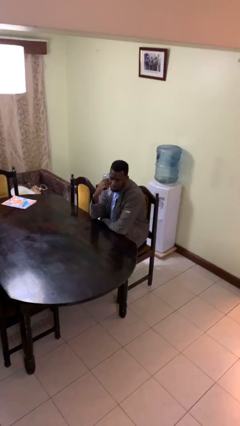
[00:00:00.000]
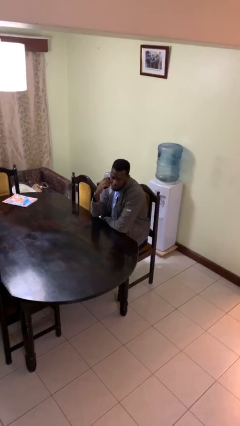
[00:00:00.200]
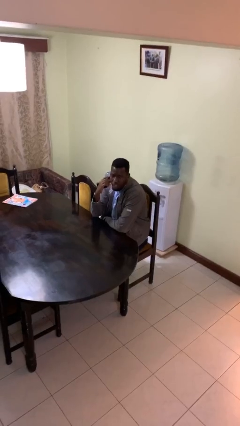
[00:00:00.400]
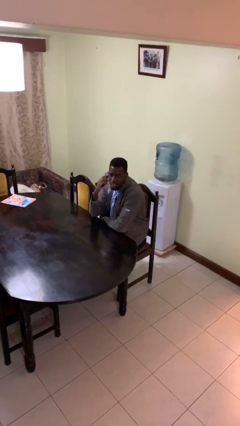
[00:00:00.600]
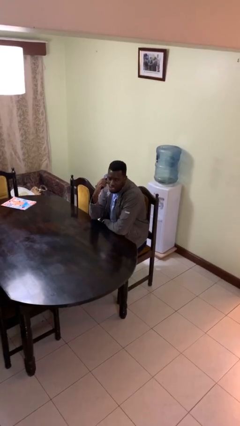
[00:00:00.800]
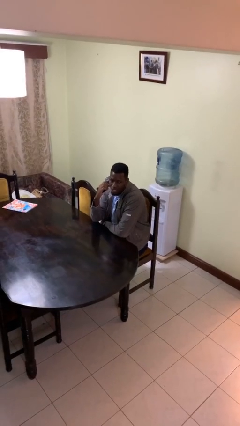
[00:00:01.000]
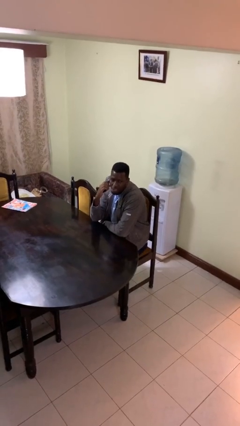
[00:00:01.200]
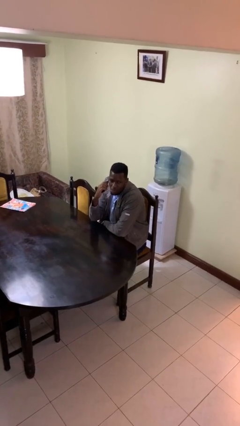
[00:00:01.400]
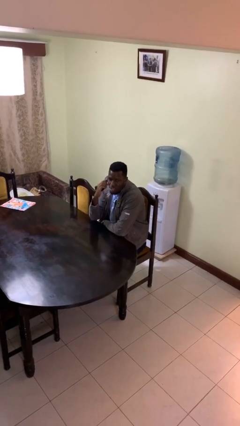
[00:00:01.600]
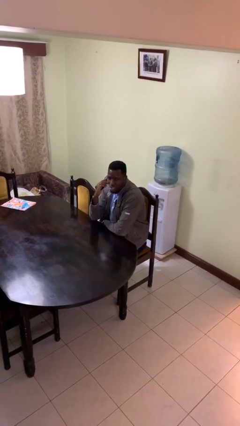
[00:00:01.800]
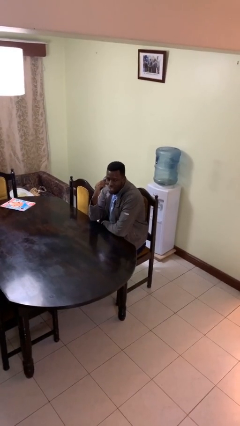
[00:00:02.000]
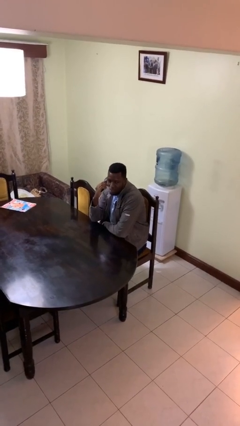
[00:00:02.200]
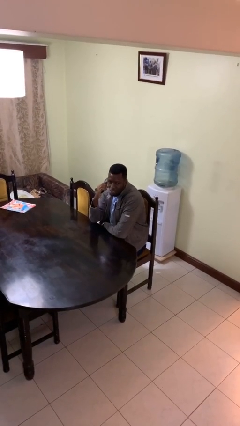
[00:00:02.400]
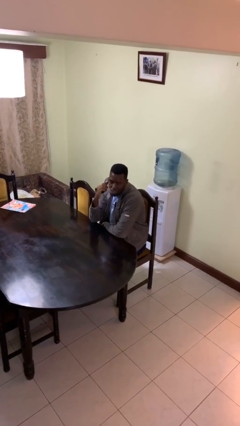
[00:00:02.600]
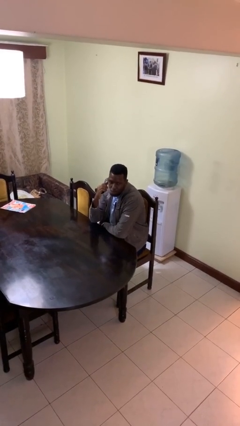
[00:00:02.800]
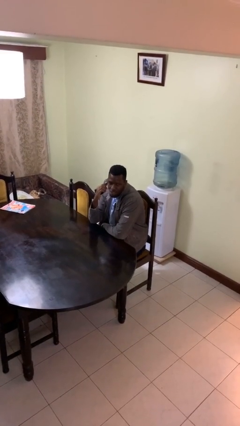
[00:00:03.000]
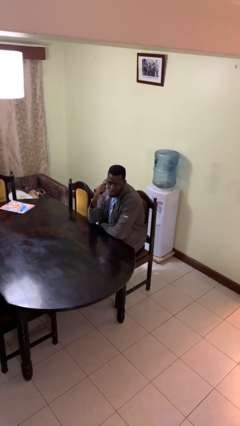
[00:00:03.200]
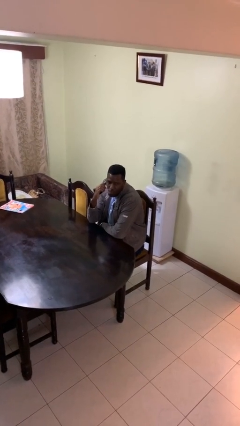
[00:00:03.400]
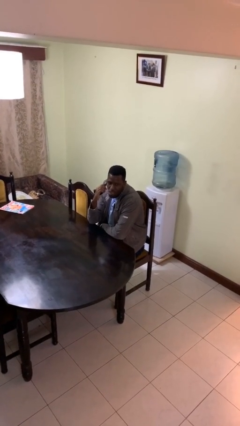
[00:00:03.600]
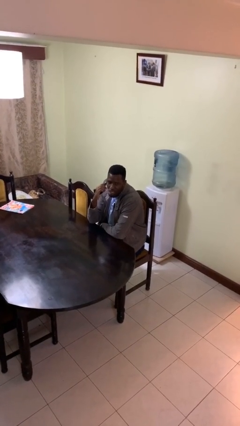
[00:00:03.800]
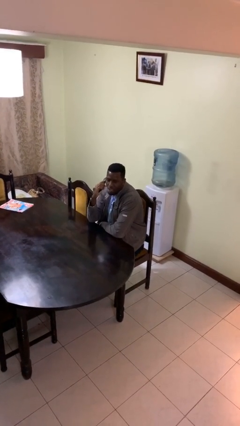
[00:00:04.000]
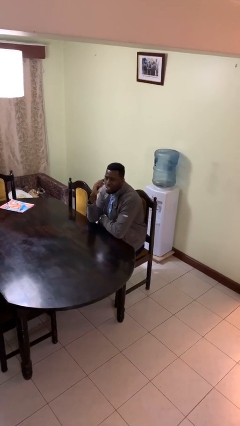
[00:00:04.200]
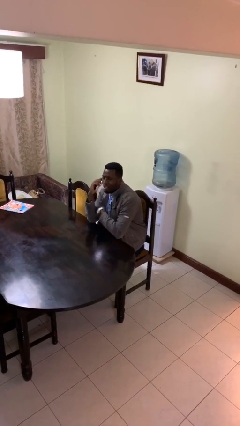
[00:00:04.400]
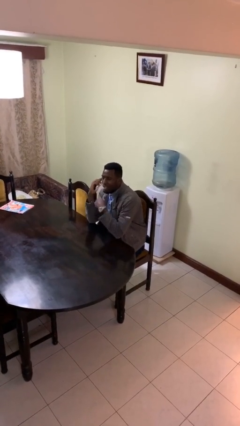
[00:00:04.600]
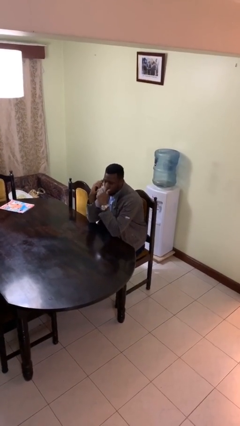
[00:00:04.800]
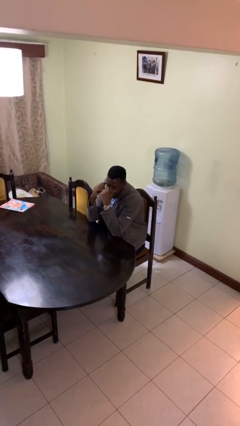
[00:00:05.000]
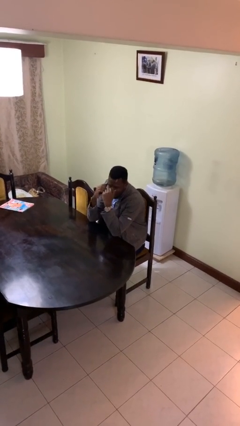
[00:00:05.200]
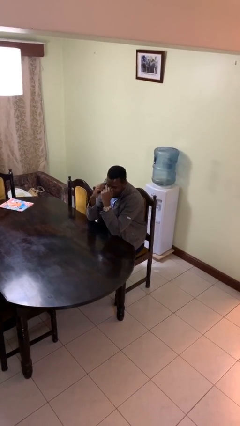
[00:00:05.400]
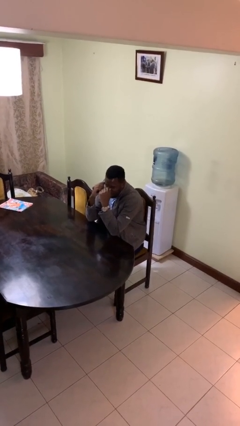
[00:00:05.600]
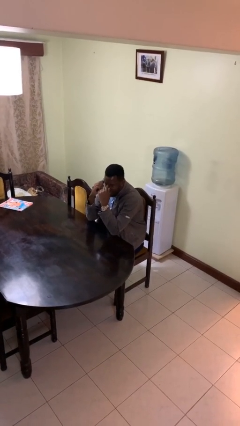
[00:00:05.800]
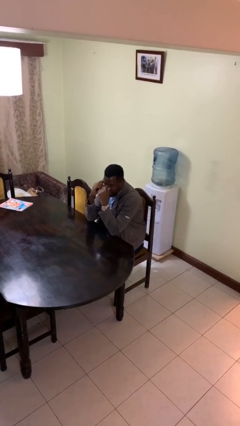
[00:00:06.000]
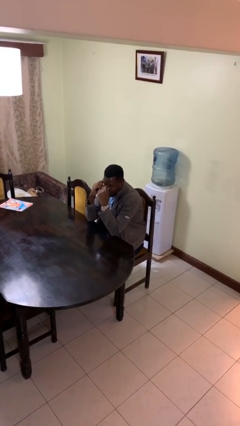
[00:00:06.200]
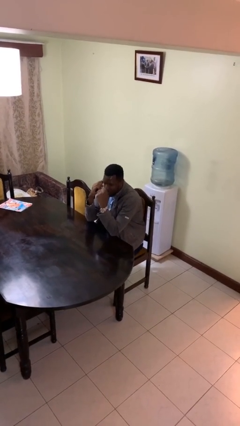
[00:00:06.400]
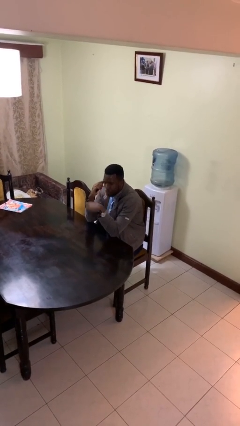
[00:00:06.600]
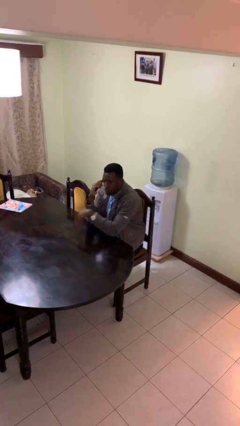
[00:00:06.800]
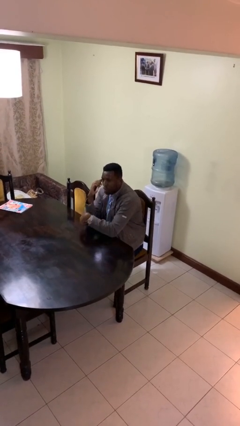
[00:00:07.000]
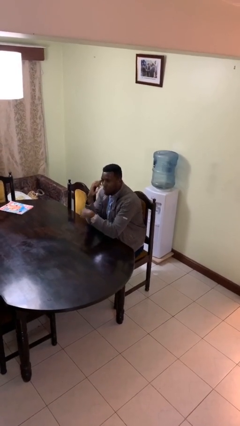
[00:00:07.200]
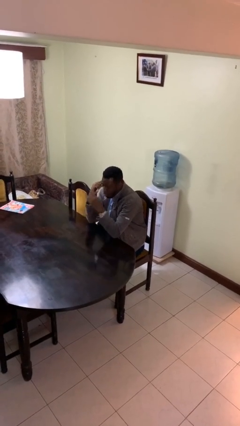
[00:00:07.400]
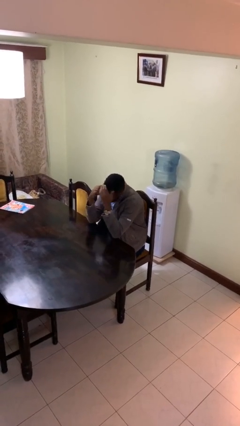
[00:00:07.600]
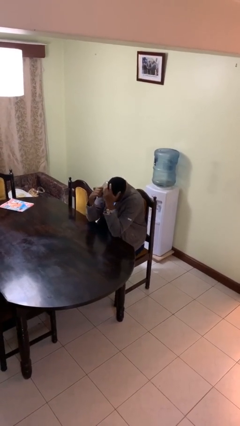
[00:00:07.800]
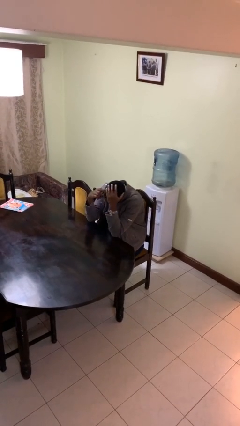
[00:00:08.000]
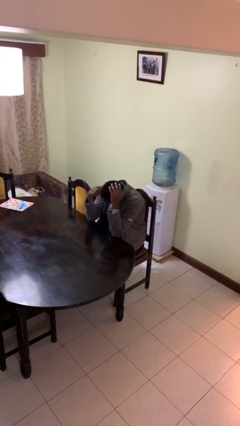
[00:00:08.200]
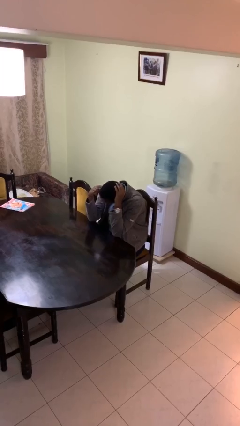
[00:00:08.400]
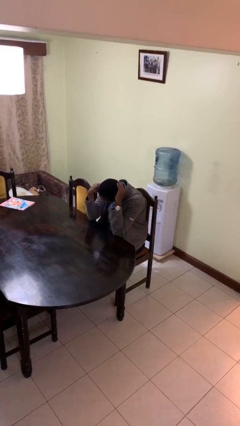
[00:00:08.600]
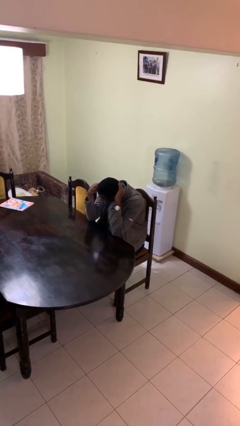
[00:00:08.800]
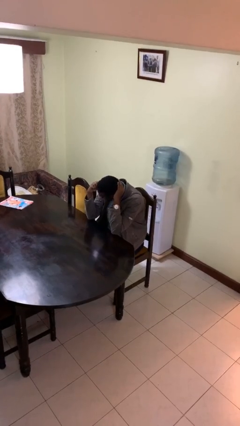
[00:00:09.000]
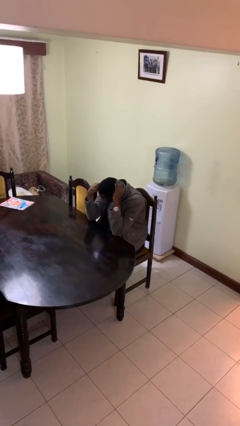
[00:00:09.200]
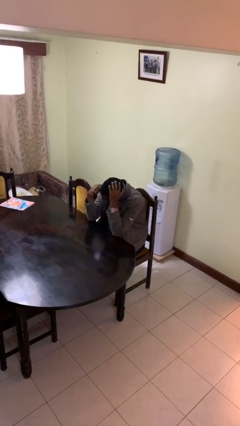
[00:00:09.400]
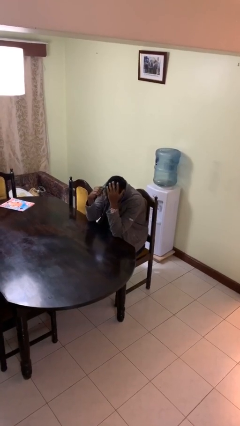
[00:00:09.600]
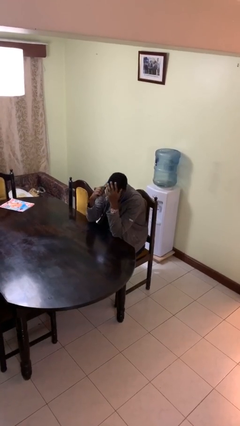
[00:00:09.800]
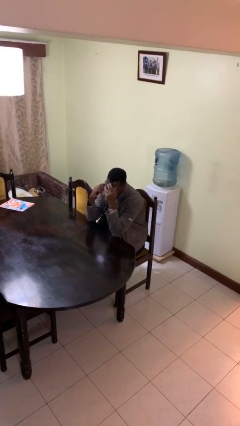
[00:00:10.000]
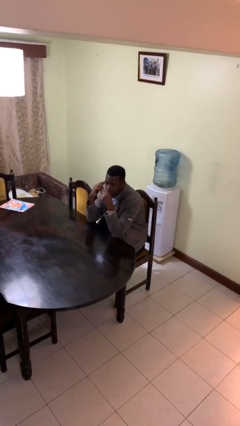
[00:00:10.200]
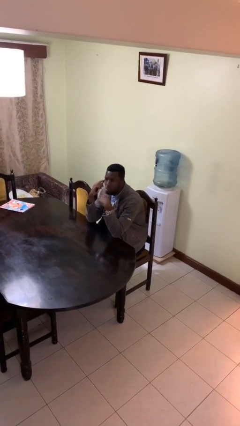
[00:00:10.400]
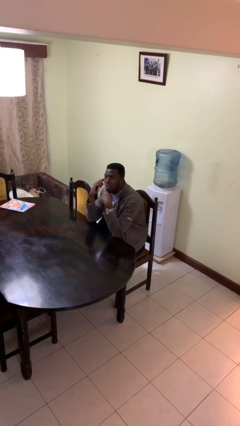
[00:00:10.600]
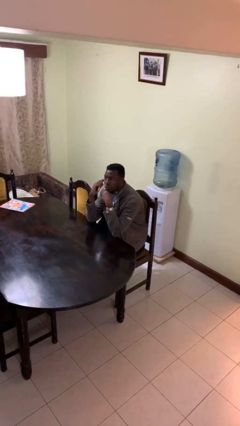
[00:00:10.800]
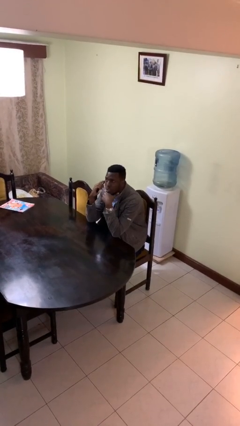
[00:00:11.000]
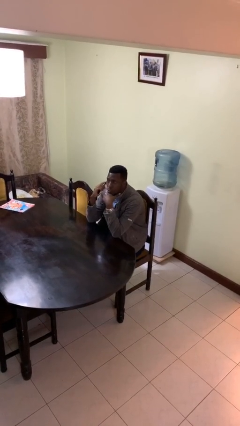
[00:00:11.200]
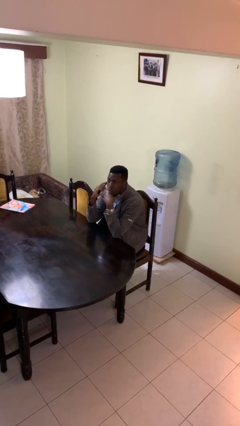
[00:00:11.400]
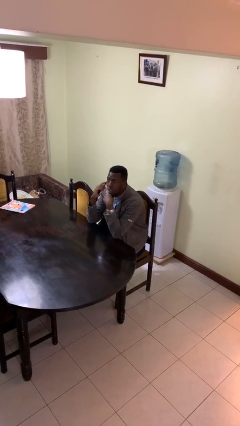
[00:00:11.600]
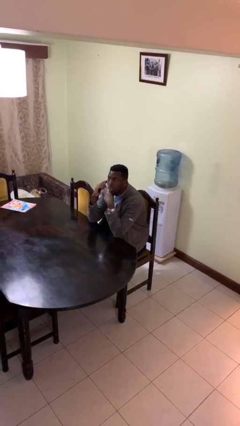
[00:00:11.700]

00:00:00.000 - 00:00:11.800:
person talks on phone

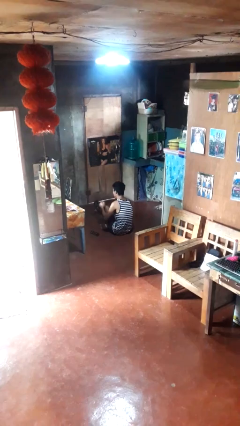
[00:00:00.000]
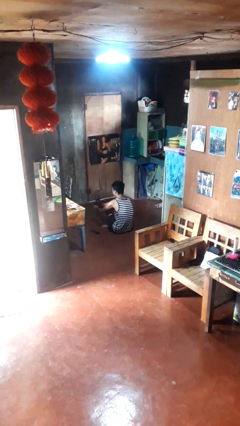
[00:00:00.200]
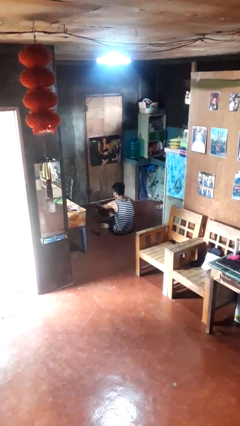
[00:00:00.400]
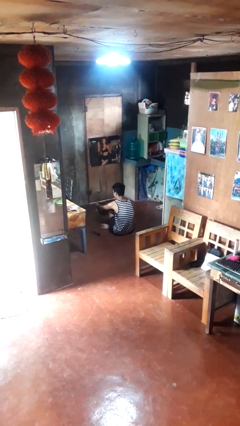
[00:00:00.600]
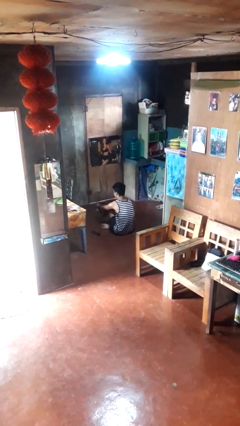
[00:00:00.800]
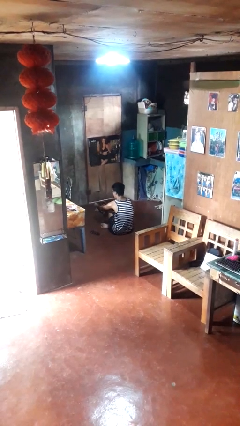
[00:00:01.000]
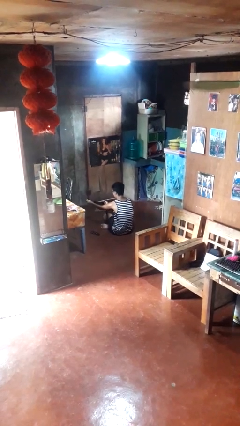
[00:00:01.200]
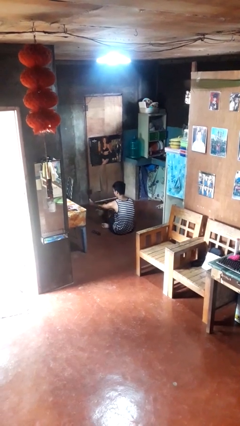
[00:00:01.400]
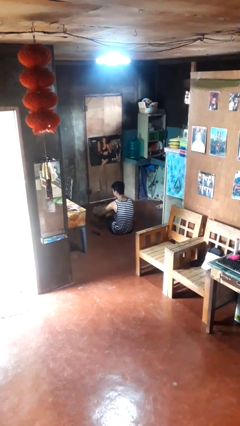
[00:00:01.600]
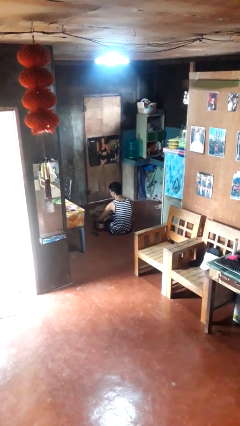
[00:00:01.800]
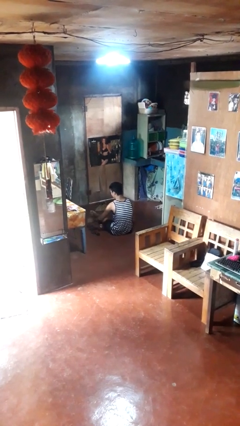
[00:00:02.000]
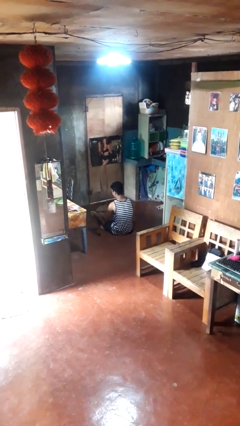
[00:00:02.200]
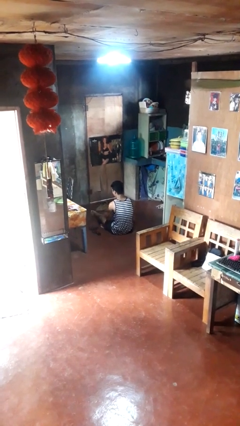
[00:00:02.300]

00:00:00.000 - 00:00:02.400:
person takes off socks

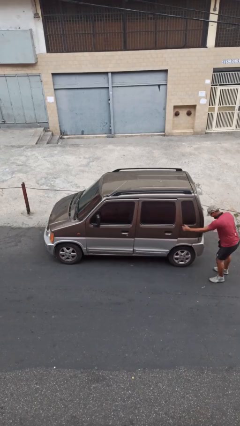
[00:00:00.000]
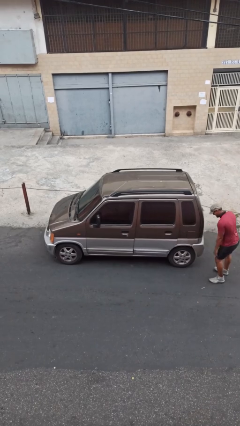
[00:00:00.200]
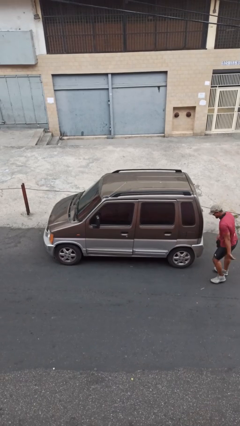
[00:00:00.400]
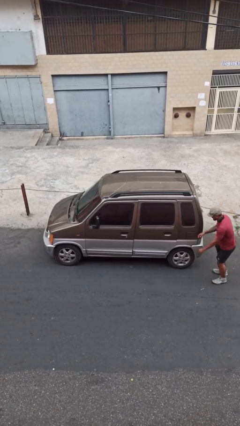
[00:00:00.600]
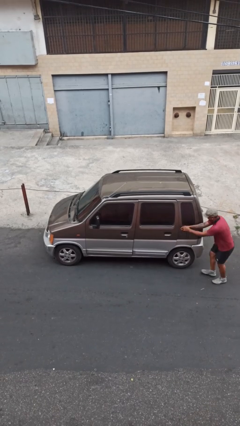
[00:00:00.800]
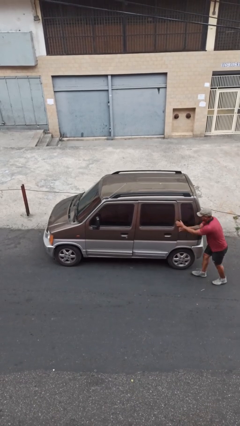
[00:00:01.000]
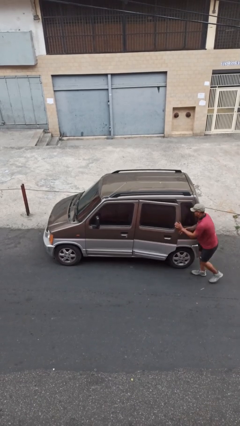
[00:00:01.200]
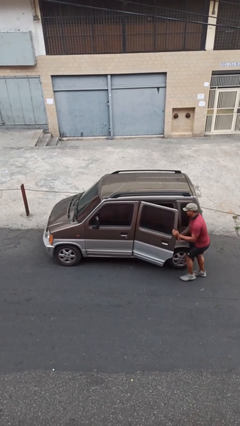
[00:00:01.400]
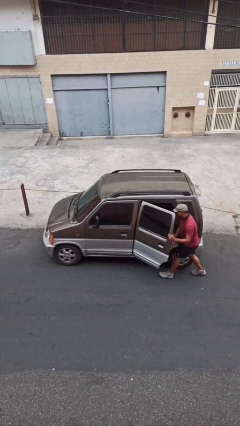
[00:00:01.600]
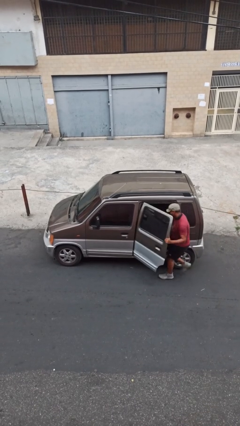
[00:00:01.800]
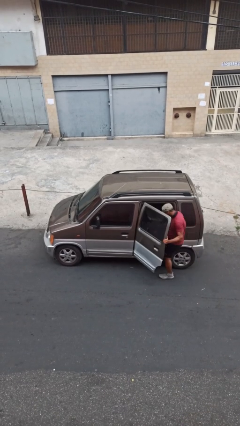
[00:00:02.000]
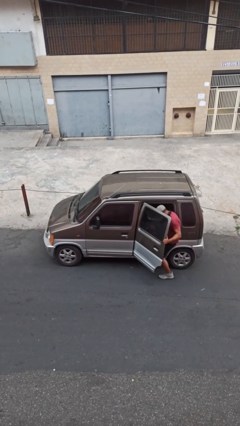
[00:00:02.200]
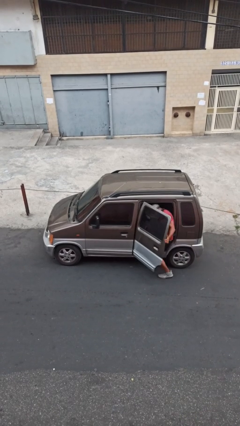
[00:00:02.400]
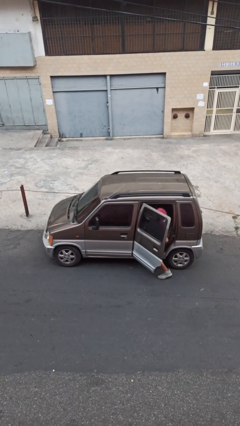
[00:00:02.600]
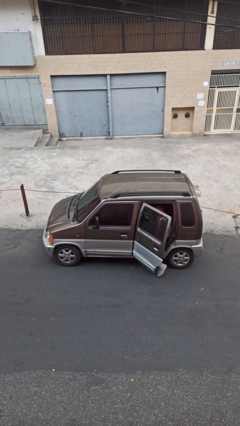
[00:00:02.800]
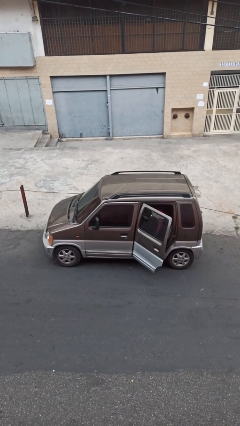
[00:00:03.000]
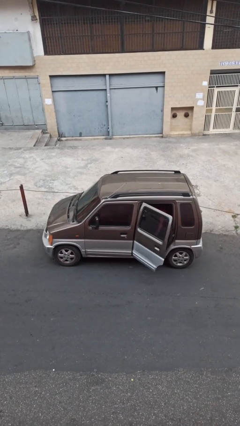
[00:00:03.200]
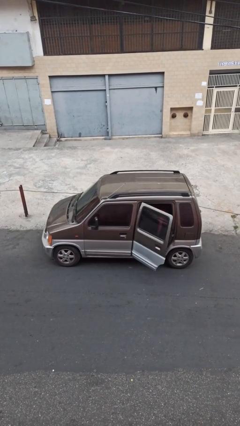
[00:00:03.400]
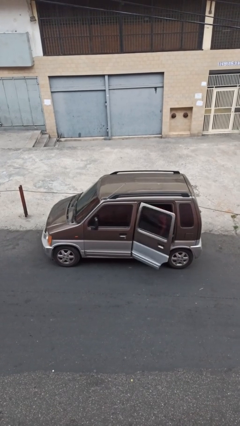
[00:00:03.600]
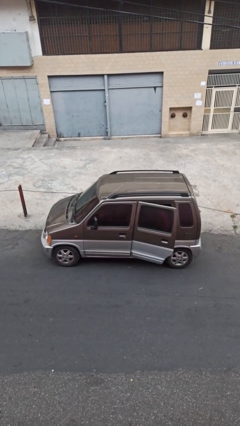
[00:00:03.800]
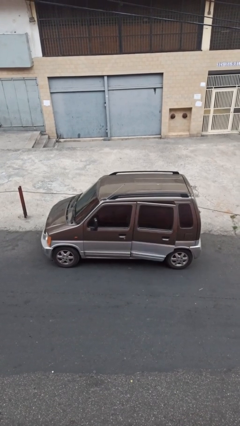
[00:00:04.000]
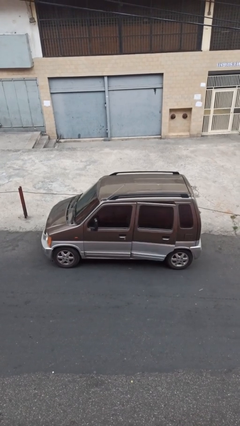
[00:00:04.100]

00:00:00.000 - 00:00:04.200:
car picks up person
